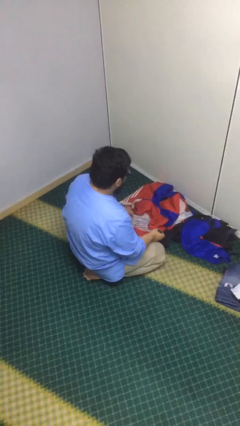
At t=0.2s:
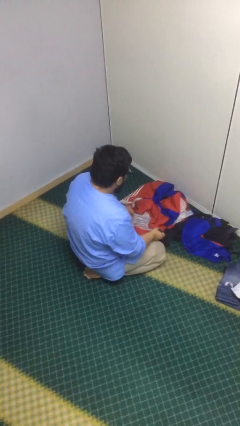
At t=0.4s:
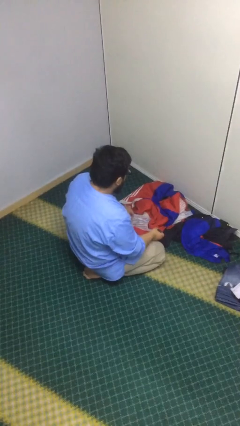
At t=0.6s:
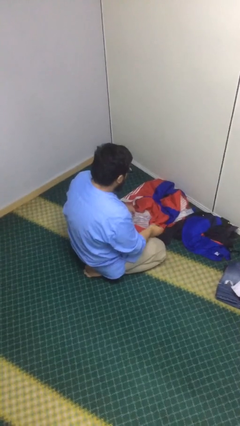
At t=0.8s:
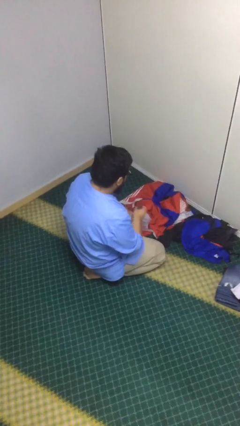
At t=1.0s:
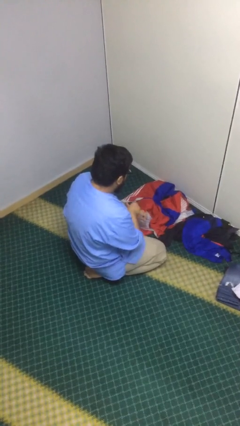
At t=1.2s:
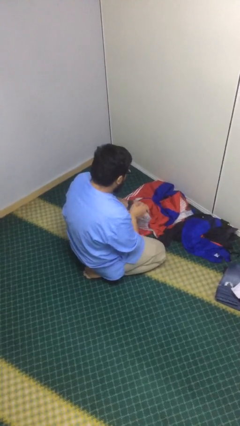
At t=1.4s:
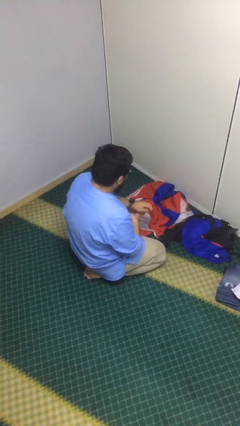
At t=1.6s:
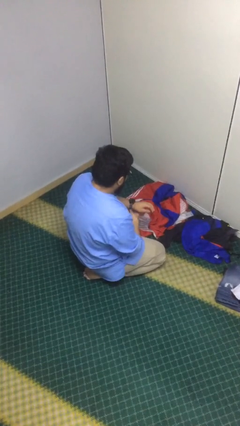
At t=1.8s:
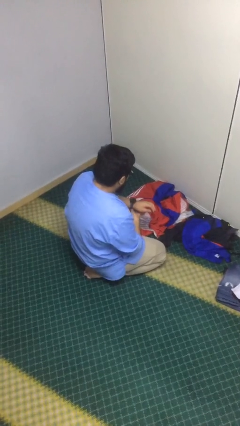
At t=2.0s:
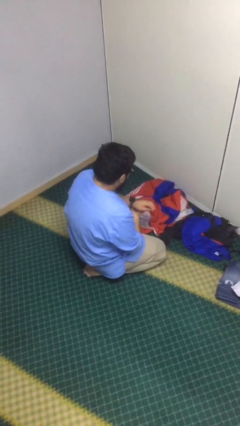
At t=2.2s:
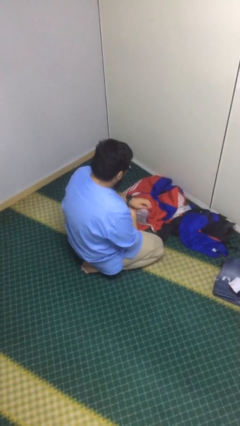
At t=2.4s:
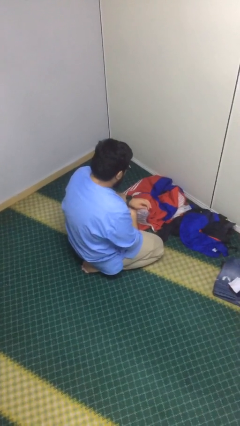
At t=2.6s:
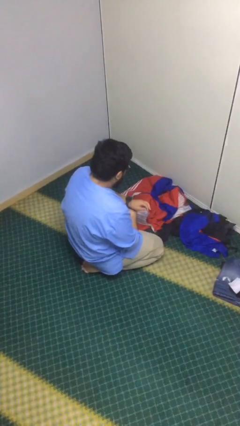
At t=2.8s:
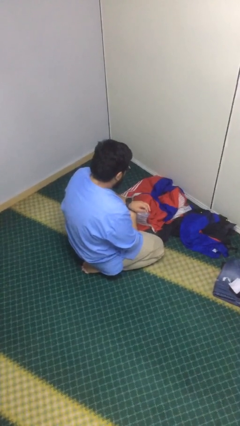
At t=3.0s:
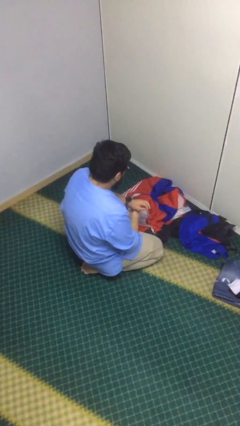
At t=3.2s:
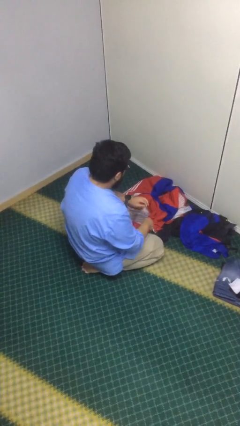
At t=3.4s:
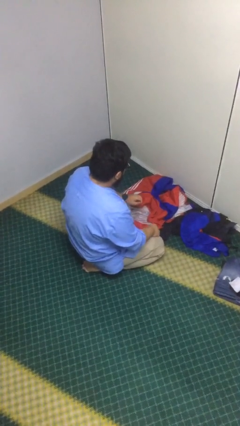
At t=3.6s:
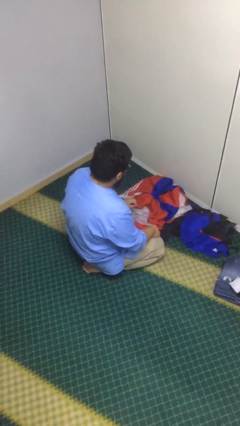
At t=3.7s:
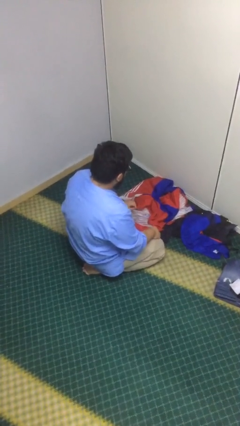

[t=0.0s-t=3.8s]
person puts on wristwatch

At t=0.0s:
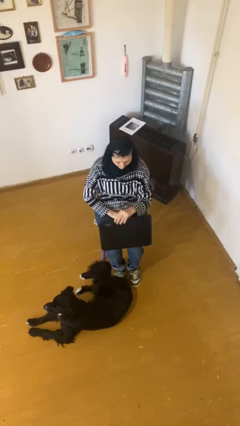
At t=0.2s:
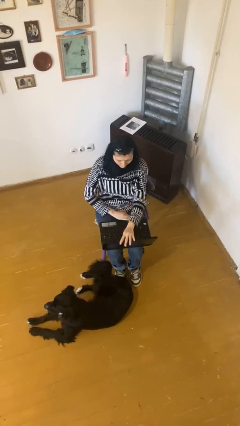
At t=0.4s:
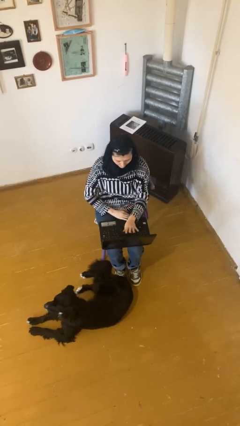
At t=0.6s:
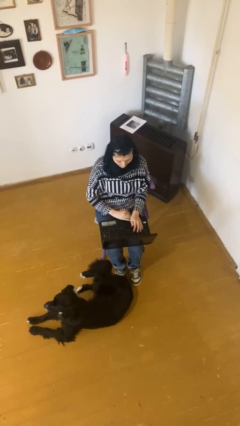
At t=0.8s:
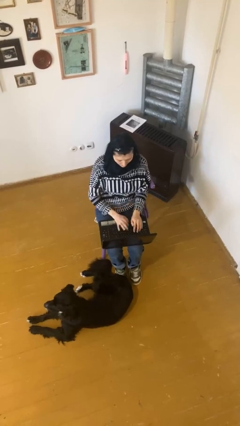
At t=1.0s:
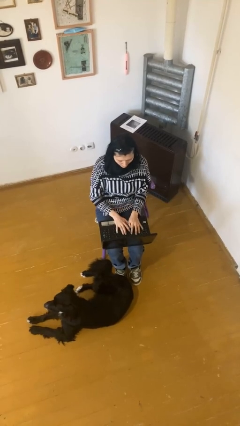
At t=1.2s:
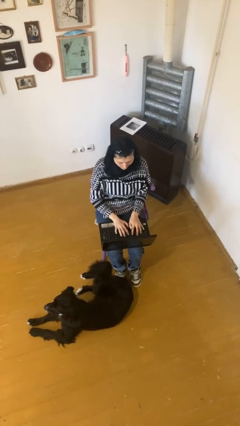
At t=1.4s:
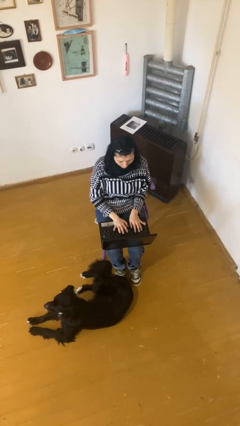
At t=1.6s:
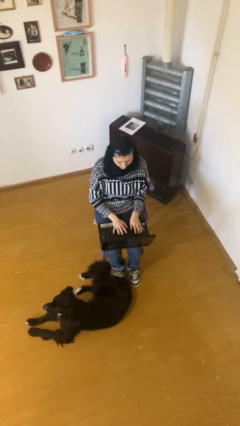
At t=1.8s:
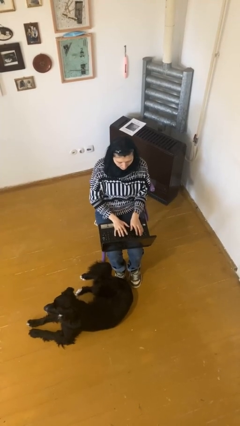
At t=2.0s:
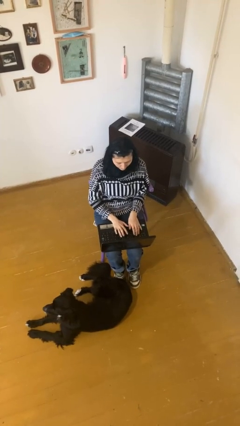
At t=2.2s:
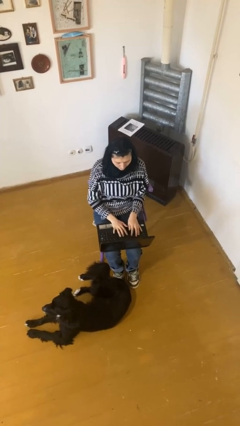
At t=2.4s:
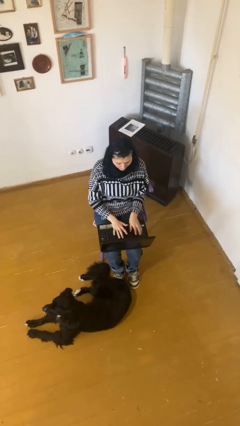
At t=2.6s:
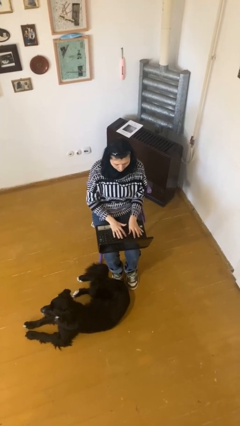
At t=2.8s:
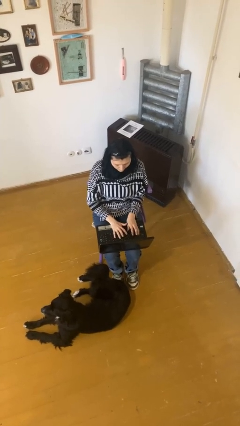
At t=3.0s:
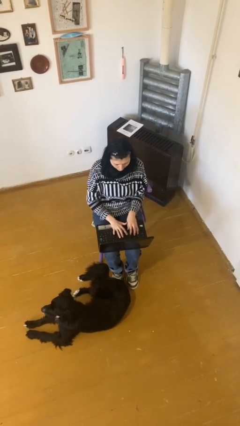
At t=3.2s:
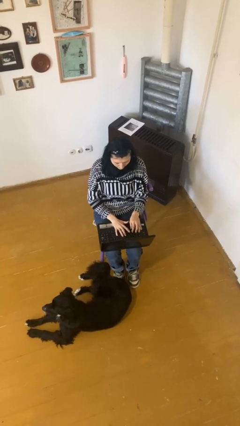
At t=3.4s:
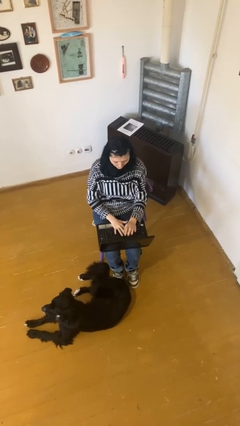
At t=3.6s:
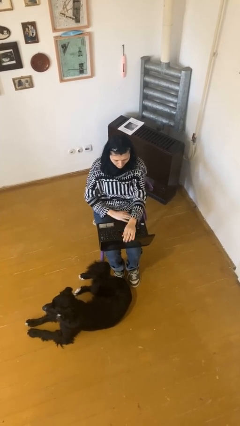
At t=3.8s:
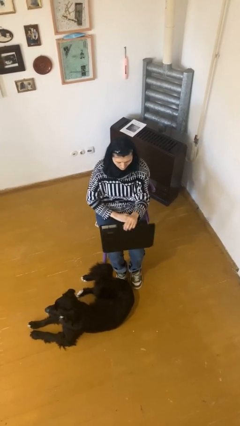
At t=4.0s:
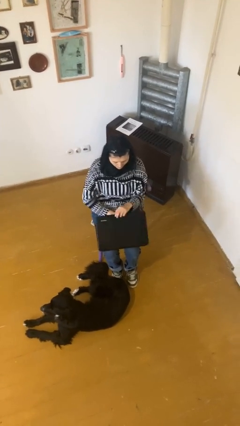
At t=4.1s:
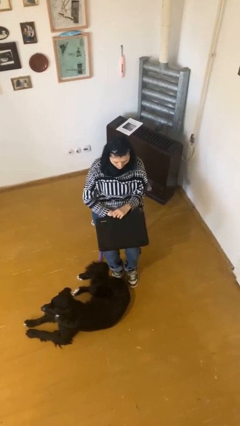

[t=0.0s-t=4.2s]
person interacts with laptop

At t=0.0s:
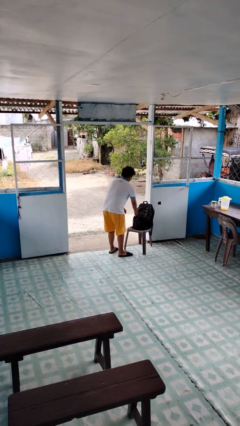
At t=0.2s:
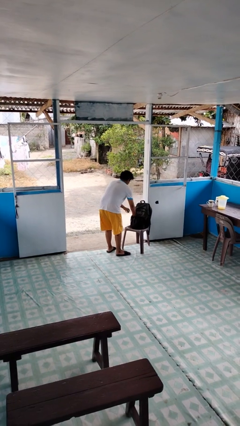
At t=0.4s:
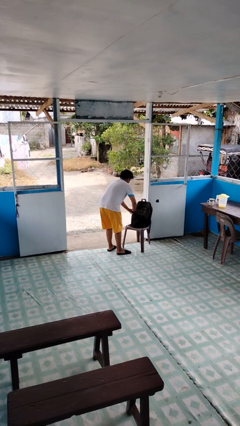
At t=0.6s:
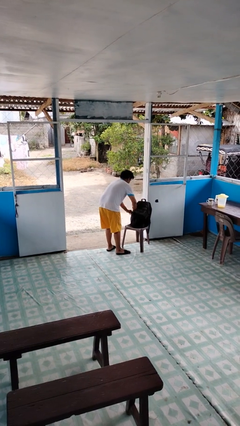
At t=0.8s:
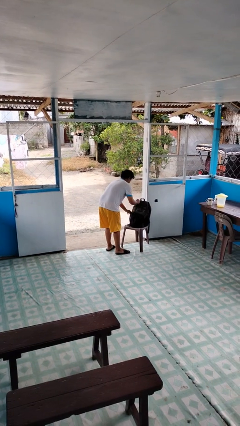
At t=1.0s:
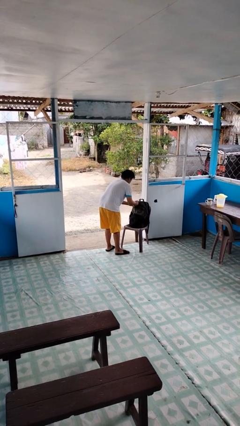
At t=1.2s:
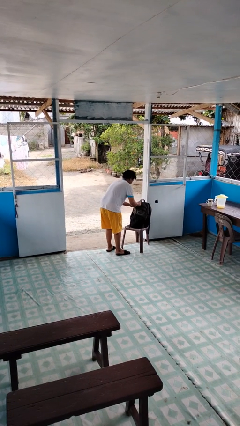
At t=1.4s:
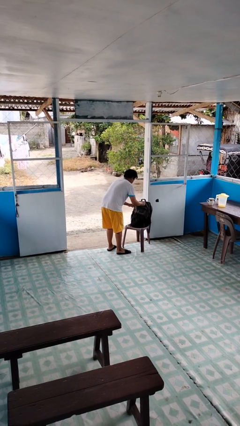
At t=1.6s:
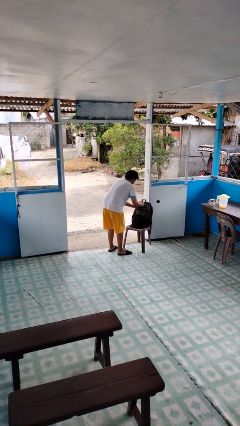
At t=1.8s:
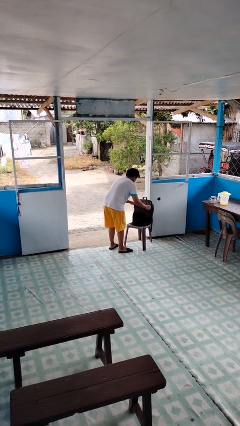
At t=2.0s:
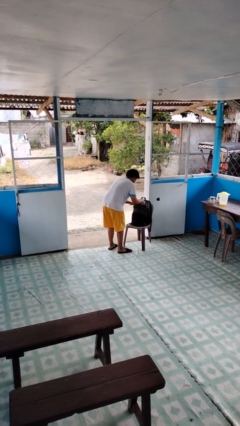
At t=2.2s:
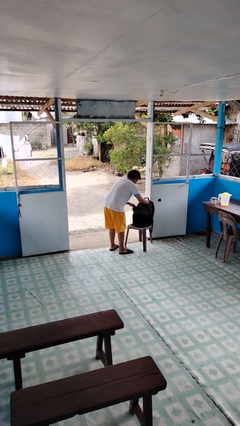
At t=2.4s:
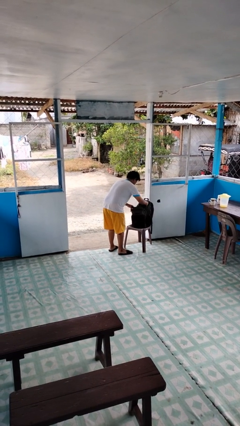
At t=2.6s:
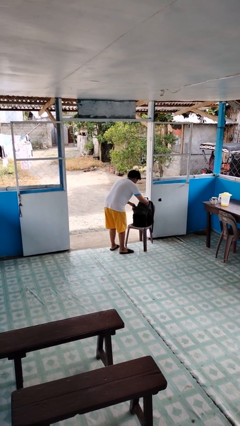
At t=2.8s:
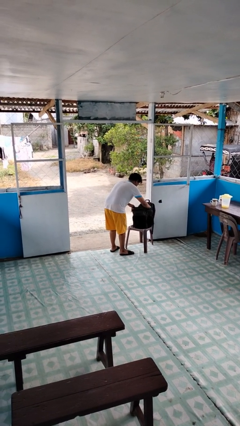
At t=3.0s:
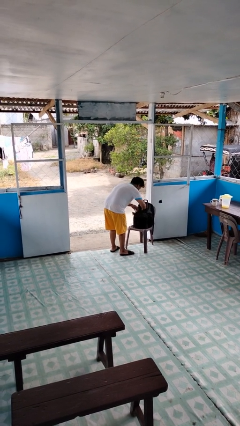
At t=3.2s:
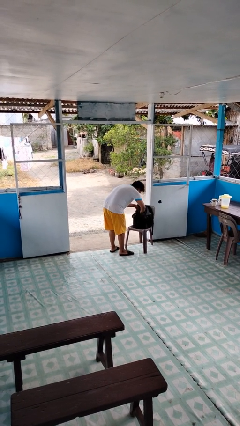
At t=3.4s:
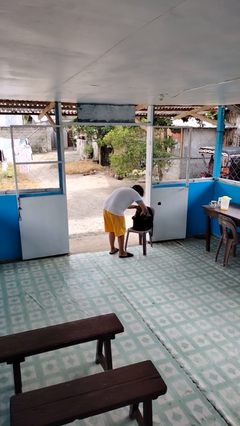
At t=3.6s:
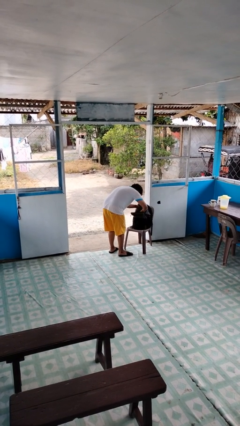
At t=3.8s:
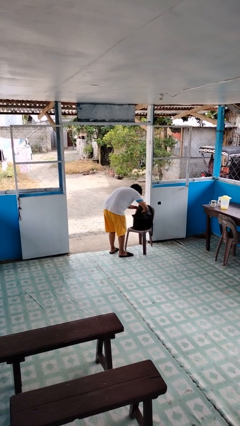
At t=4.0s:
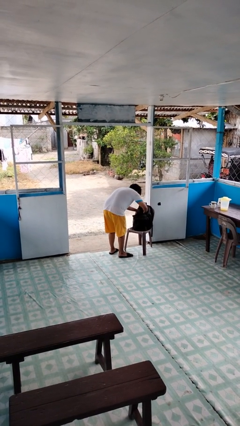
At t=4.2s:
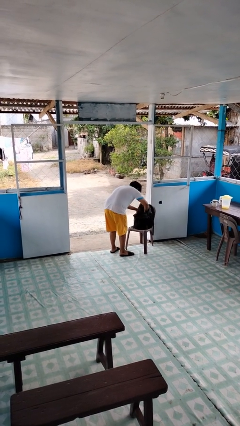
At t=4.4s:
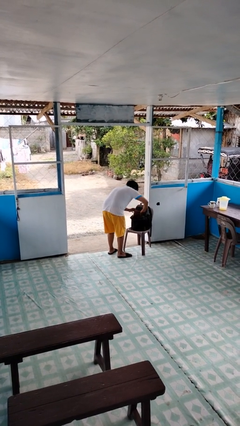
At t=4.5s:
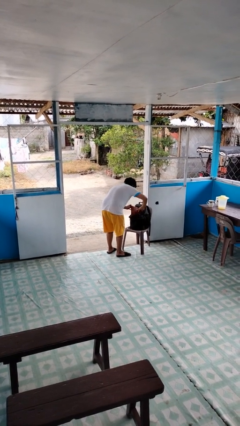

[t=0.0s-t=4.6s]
person searches in backpack

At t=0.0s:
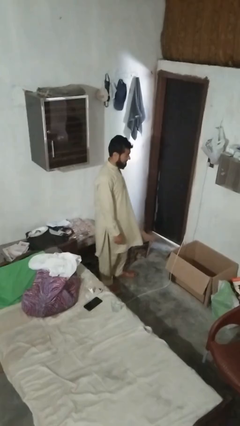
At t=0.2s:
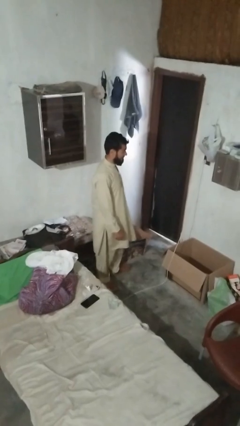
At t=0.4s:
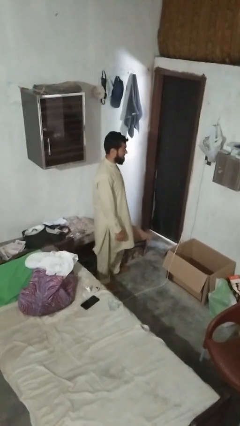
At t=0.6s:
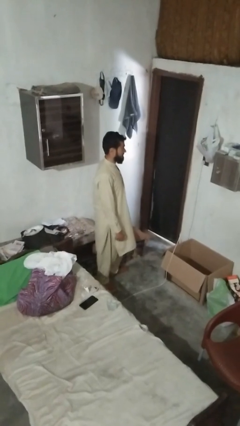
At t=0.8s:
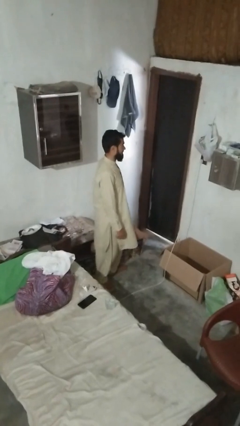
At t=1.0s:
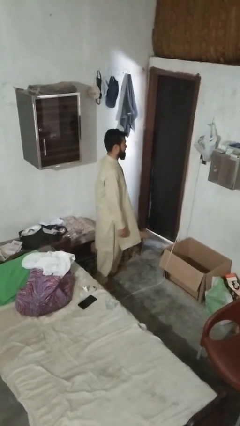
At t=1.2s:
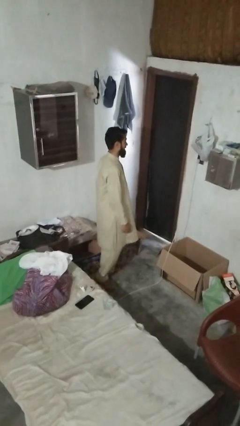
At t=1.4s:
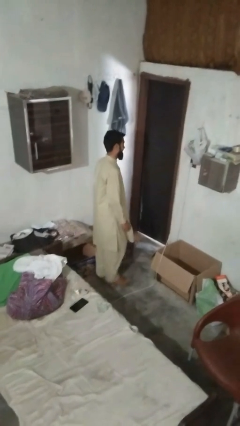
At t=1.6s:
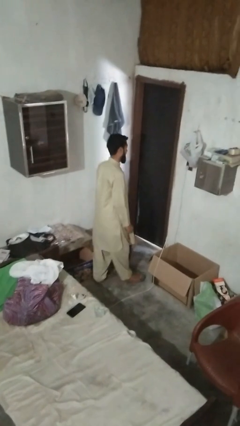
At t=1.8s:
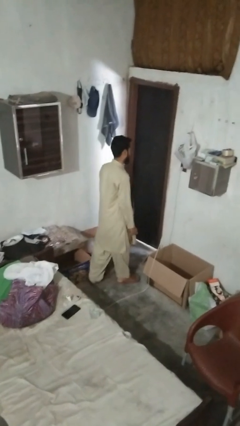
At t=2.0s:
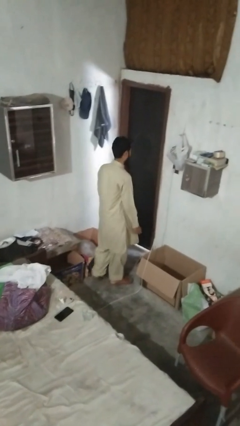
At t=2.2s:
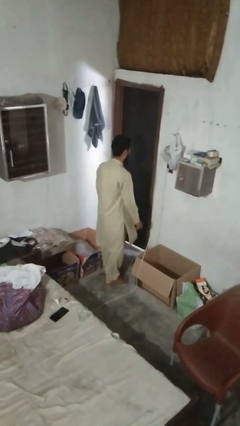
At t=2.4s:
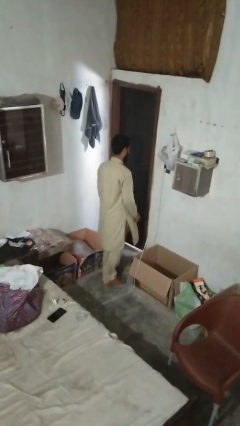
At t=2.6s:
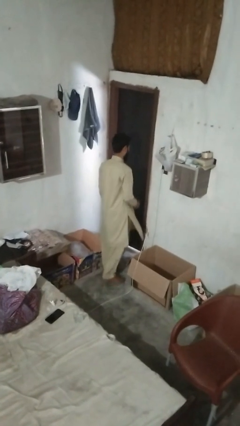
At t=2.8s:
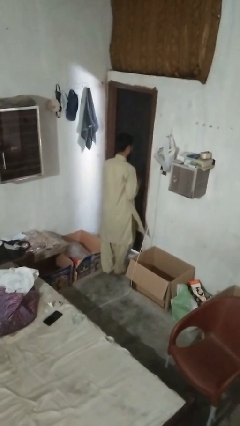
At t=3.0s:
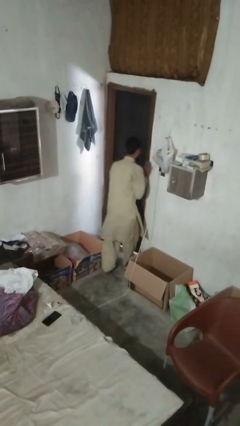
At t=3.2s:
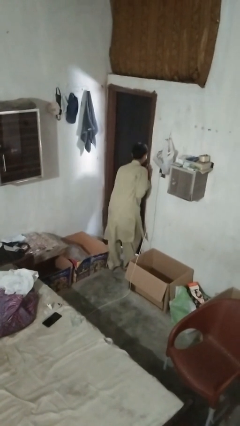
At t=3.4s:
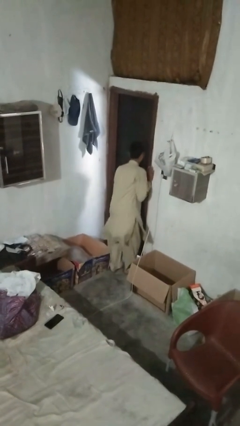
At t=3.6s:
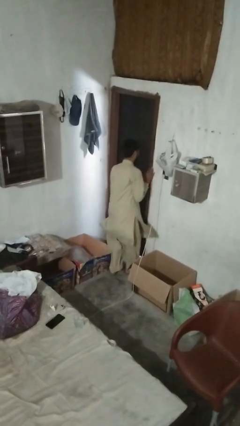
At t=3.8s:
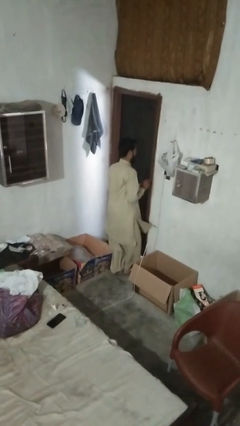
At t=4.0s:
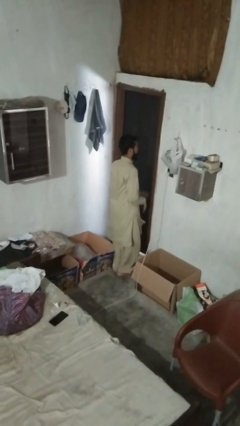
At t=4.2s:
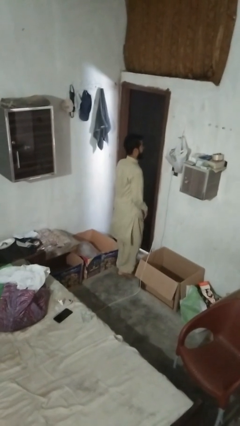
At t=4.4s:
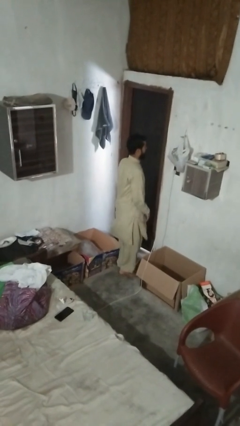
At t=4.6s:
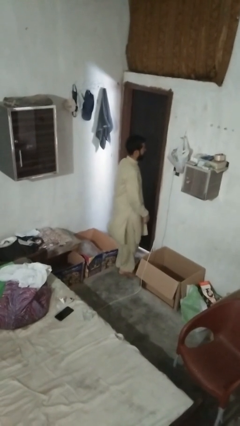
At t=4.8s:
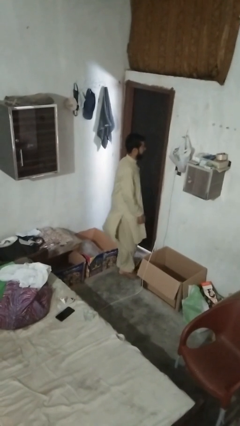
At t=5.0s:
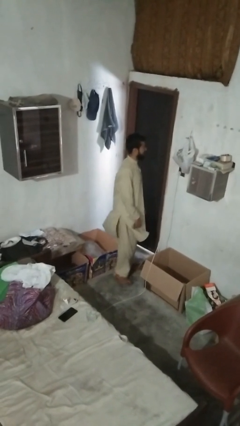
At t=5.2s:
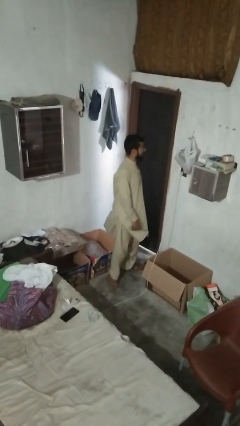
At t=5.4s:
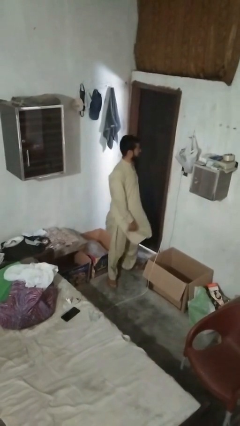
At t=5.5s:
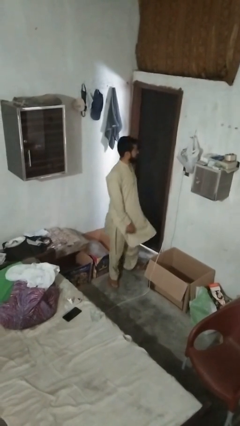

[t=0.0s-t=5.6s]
person bumps into wall
